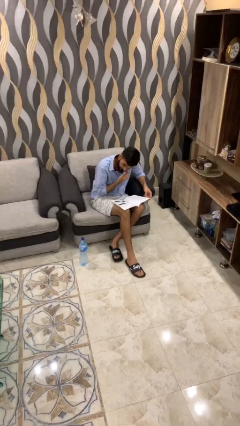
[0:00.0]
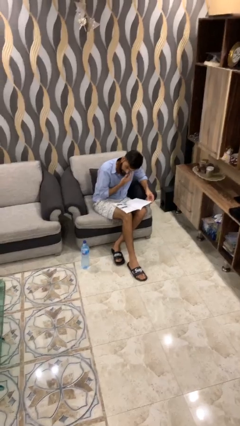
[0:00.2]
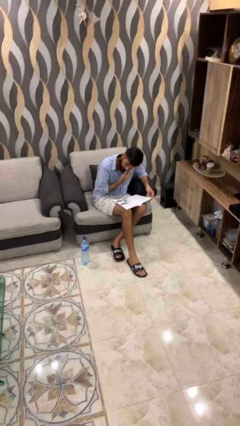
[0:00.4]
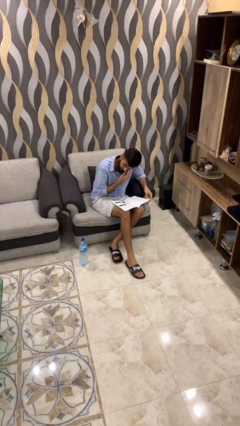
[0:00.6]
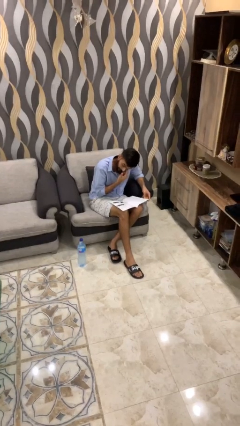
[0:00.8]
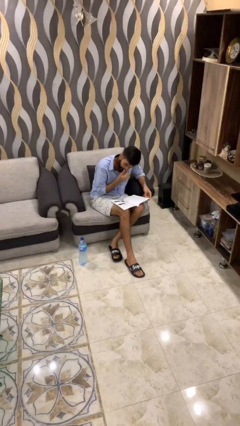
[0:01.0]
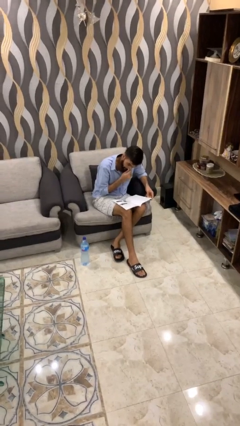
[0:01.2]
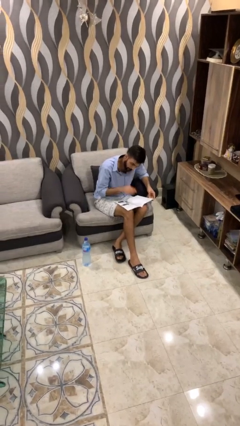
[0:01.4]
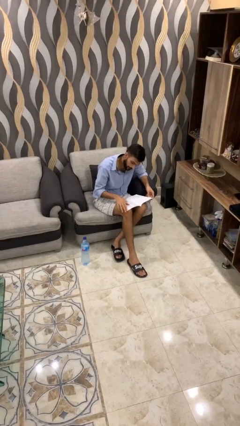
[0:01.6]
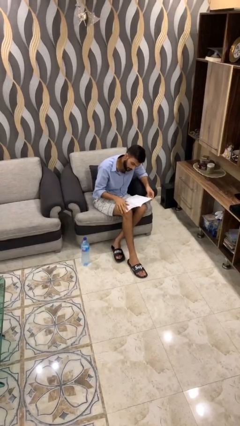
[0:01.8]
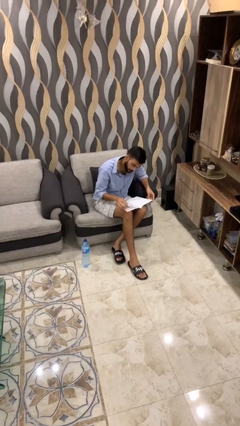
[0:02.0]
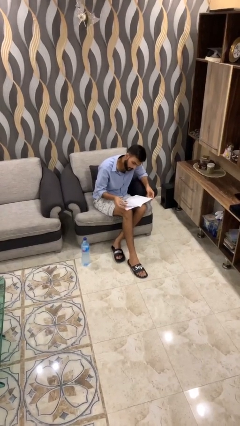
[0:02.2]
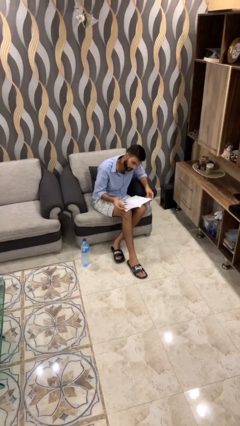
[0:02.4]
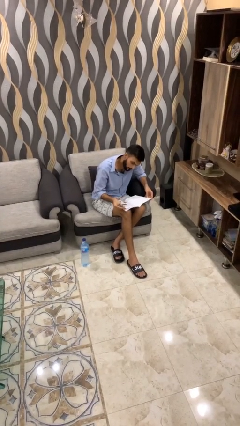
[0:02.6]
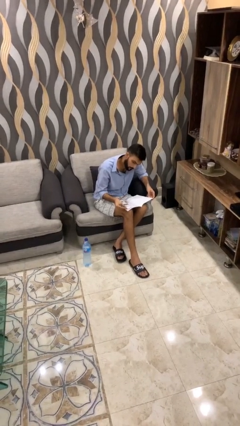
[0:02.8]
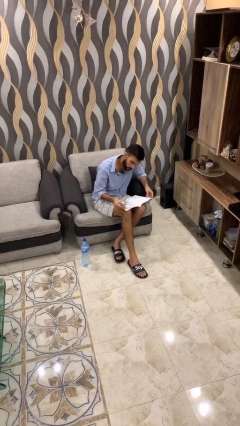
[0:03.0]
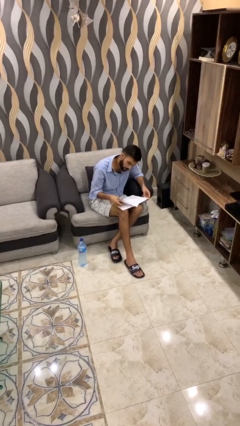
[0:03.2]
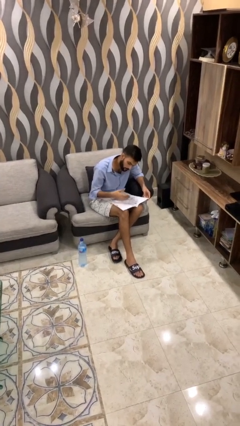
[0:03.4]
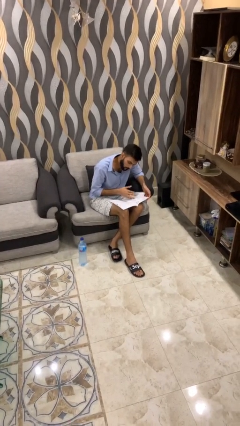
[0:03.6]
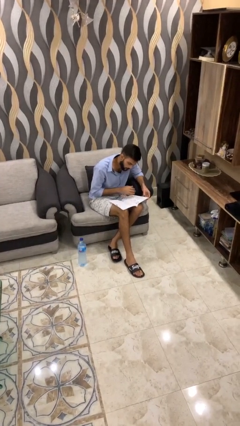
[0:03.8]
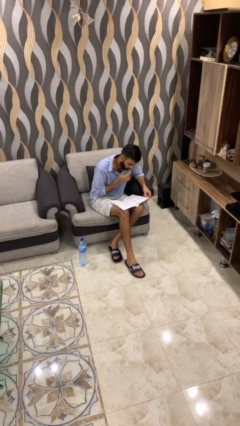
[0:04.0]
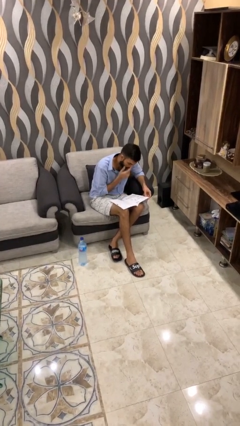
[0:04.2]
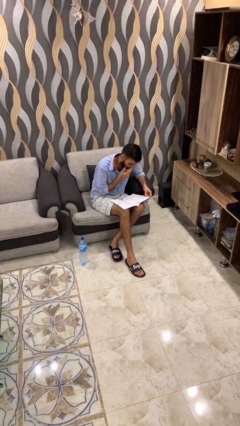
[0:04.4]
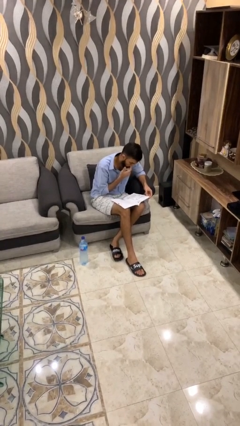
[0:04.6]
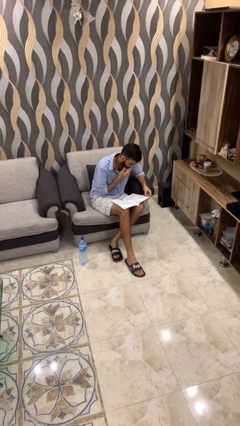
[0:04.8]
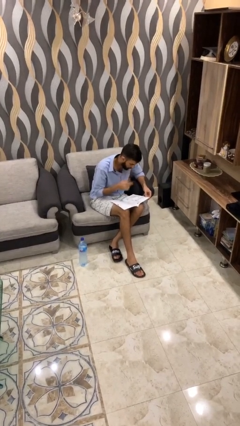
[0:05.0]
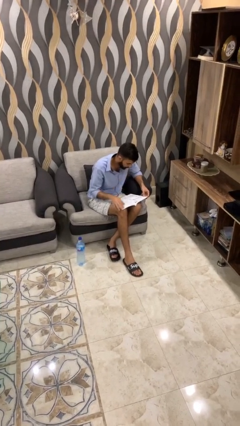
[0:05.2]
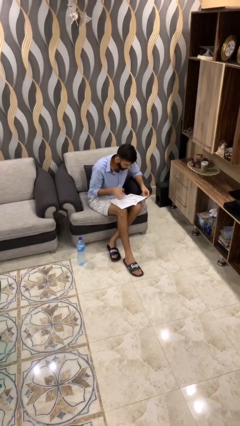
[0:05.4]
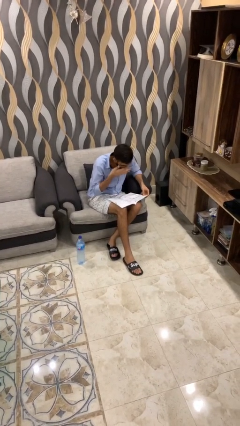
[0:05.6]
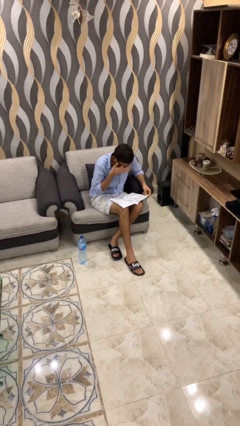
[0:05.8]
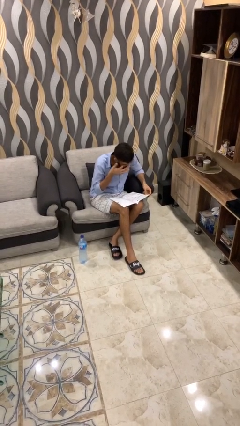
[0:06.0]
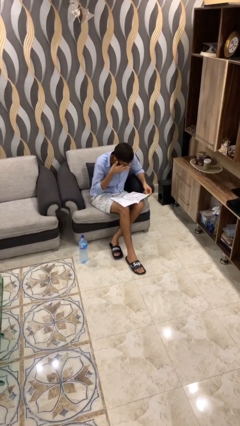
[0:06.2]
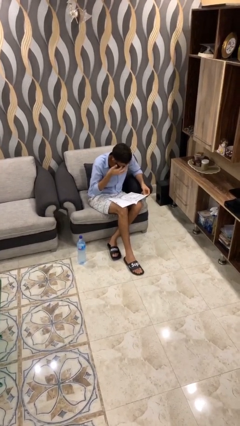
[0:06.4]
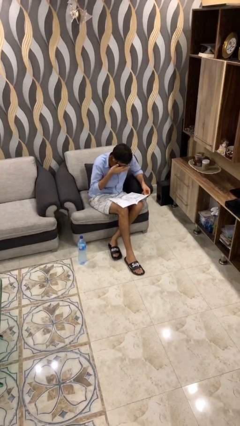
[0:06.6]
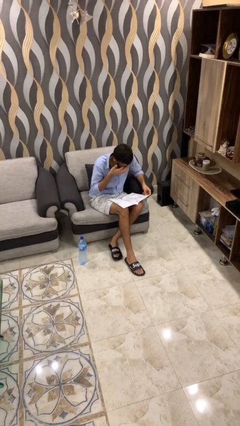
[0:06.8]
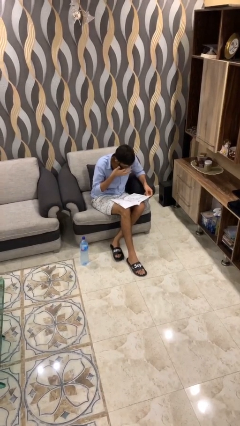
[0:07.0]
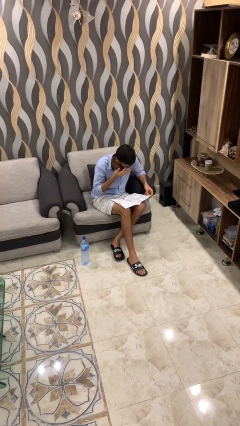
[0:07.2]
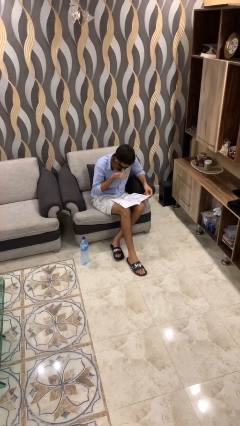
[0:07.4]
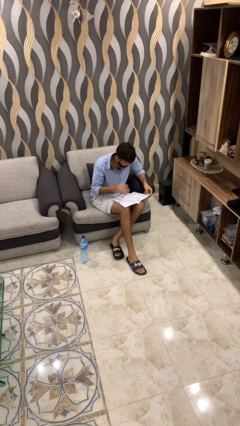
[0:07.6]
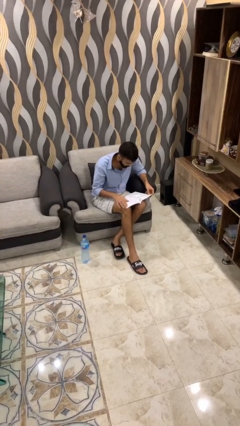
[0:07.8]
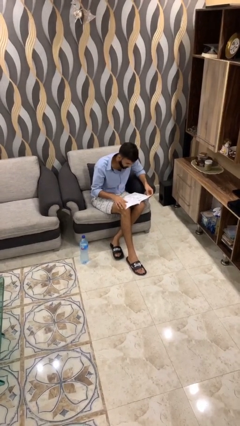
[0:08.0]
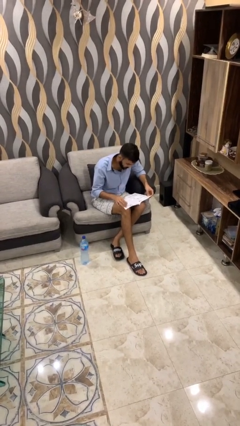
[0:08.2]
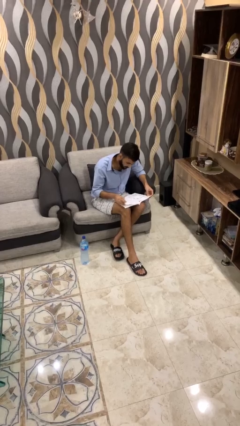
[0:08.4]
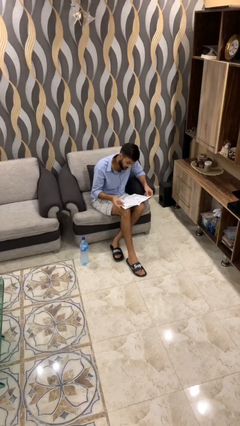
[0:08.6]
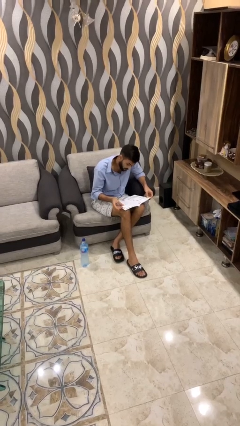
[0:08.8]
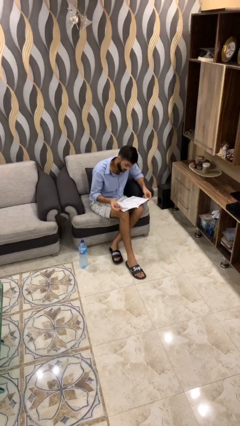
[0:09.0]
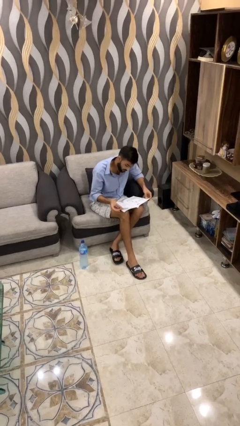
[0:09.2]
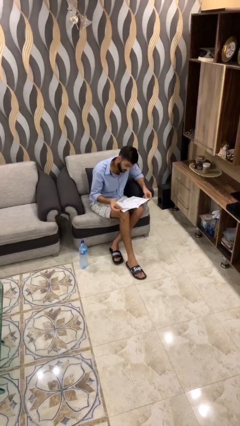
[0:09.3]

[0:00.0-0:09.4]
person reads document

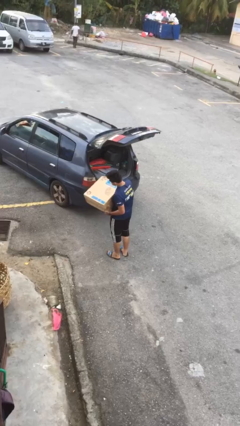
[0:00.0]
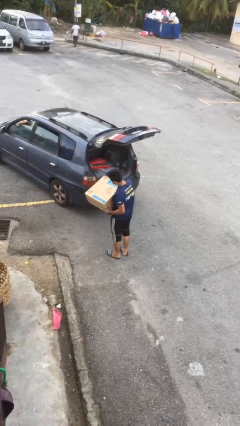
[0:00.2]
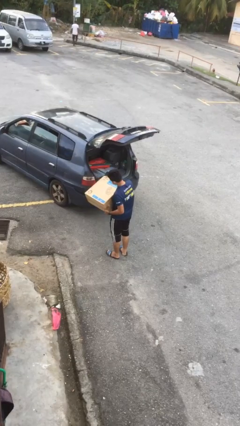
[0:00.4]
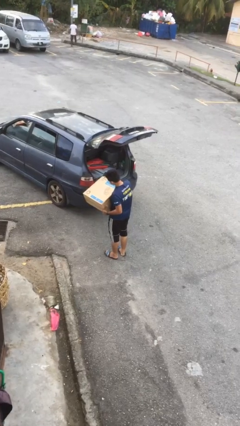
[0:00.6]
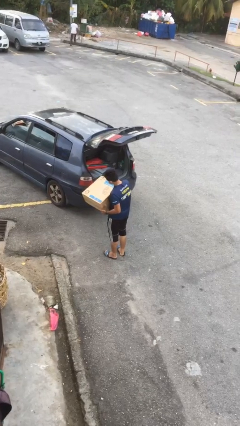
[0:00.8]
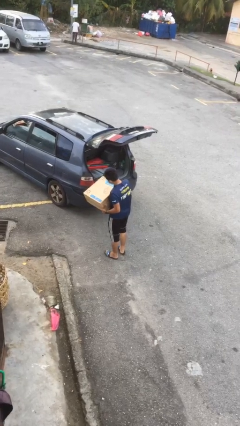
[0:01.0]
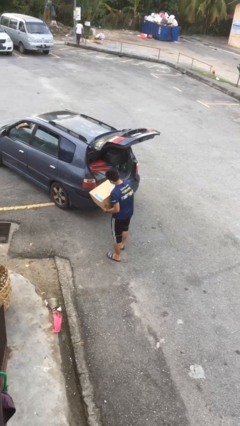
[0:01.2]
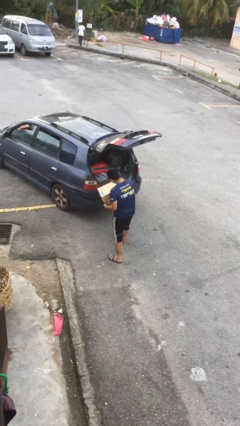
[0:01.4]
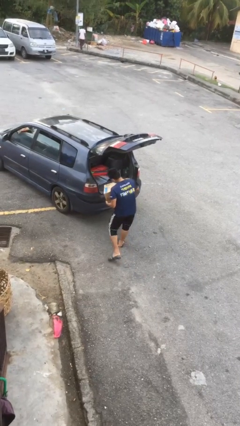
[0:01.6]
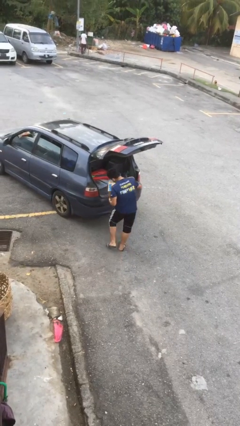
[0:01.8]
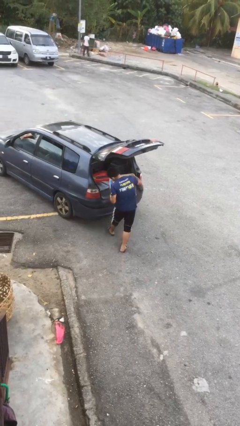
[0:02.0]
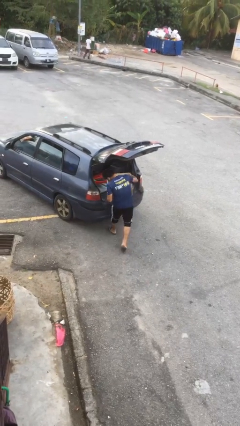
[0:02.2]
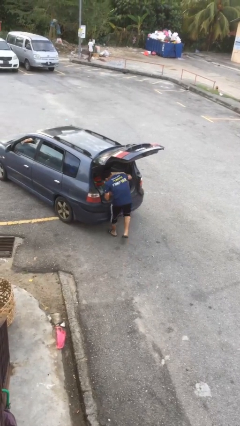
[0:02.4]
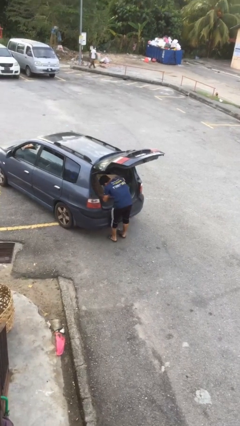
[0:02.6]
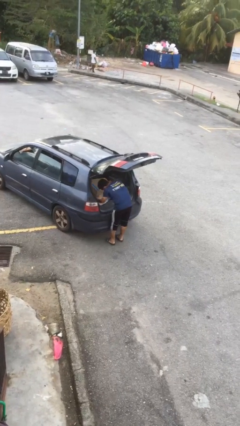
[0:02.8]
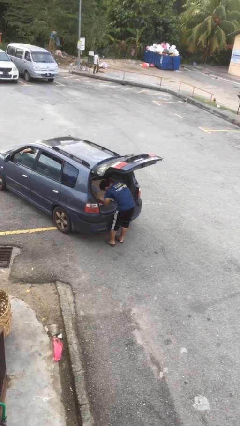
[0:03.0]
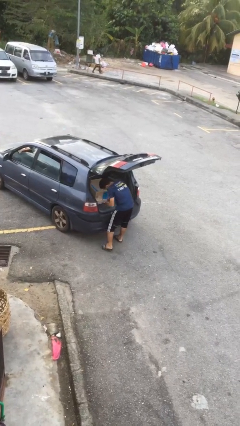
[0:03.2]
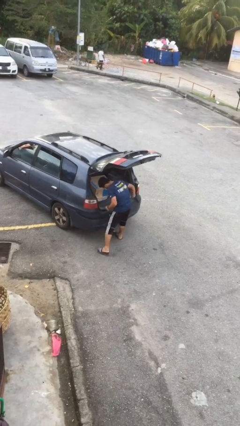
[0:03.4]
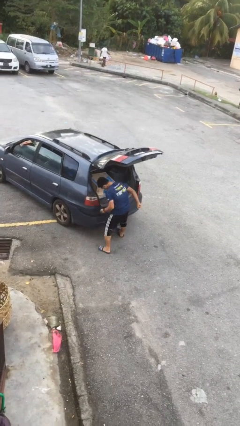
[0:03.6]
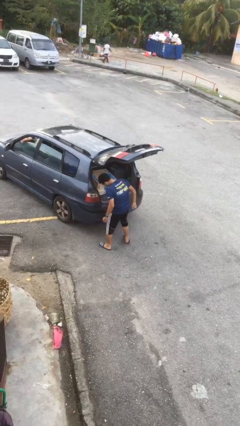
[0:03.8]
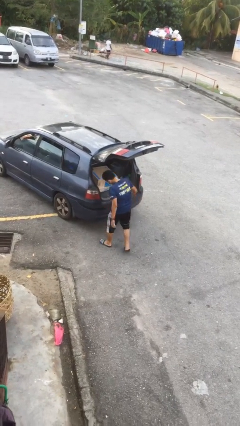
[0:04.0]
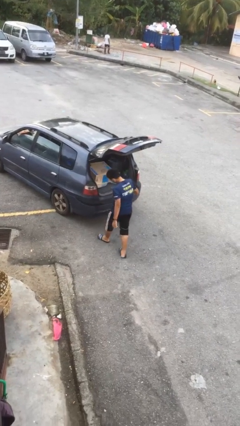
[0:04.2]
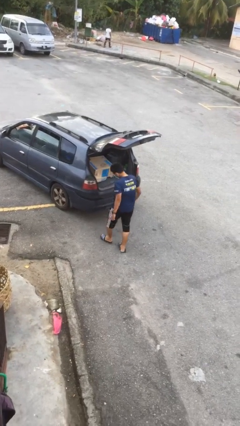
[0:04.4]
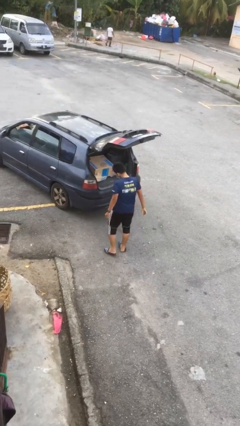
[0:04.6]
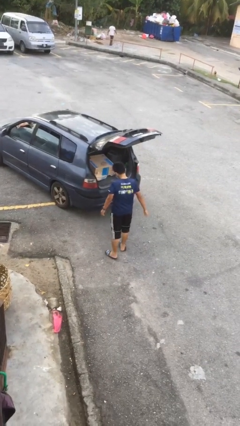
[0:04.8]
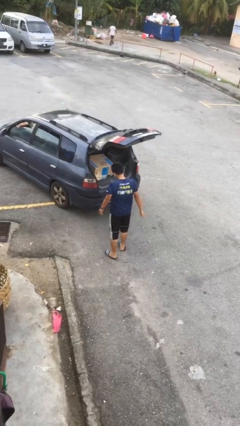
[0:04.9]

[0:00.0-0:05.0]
person loads car

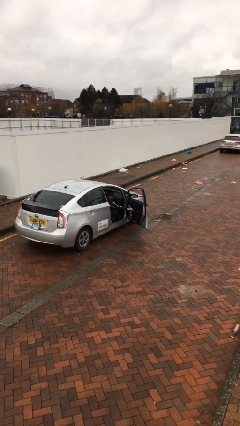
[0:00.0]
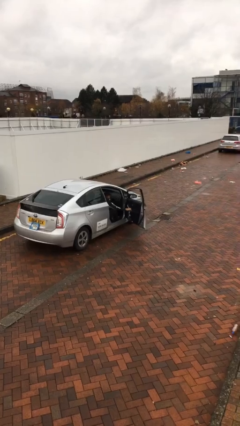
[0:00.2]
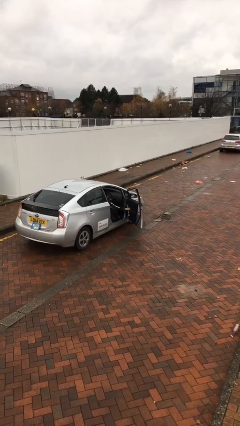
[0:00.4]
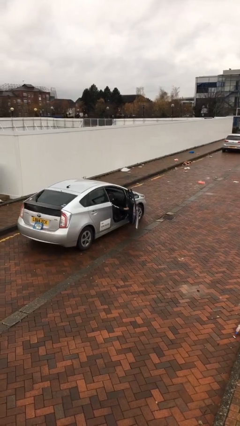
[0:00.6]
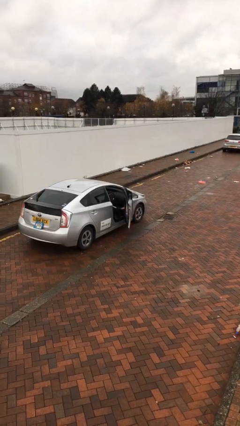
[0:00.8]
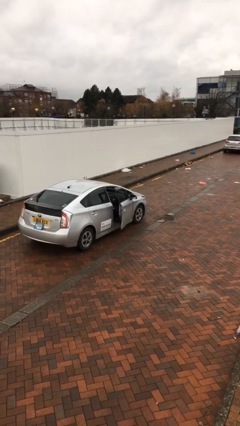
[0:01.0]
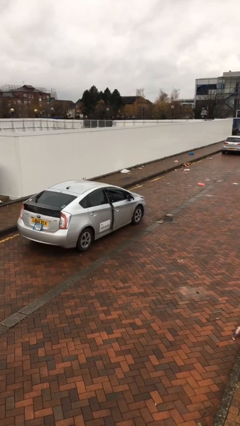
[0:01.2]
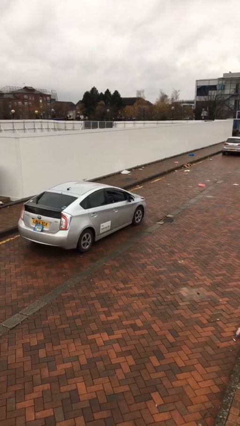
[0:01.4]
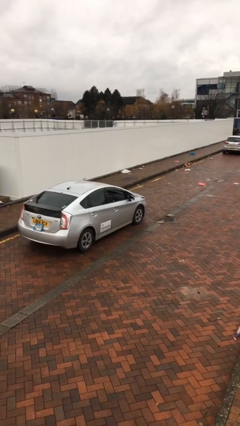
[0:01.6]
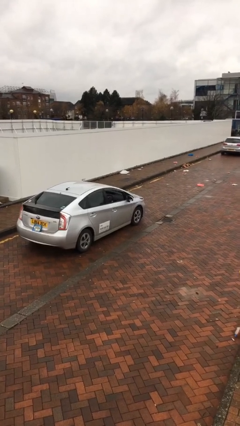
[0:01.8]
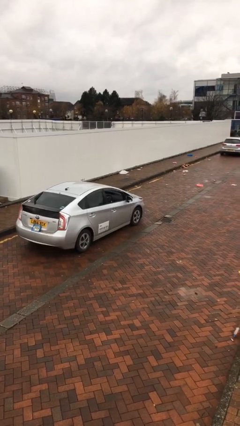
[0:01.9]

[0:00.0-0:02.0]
person closes car door

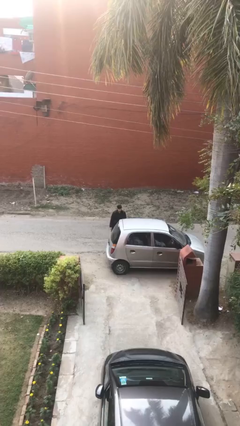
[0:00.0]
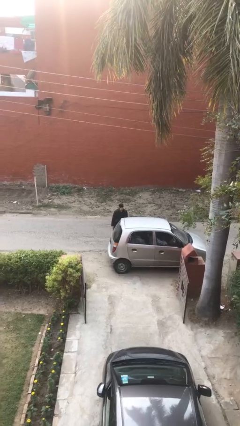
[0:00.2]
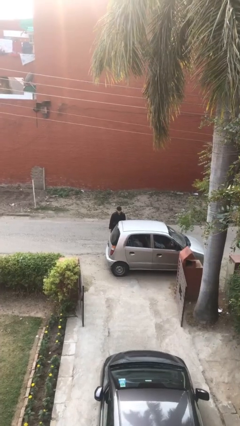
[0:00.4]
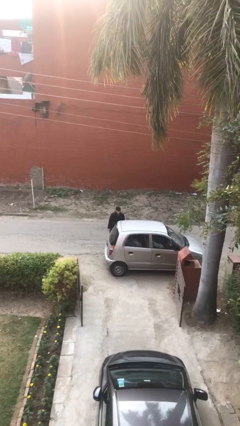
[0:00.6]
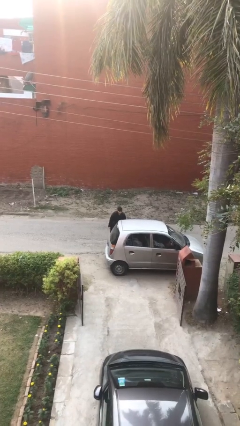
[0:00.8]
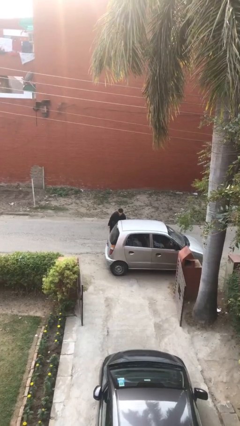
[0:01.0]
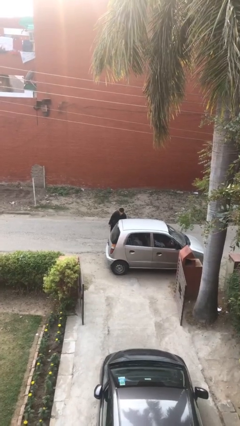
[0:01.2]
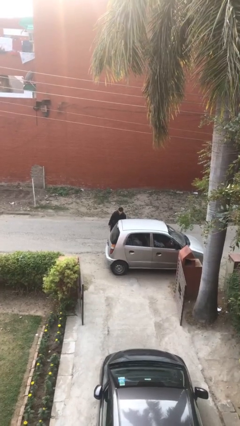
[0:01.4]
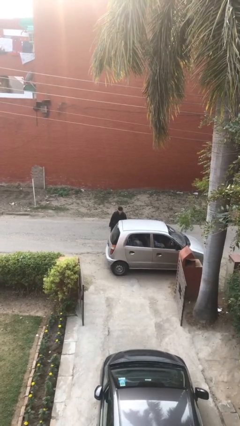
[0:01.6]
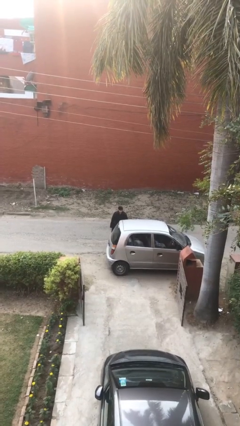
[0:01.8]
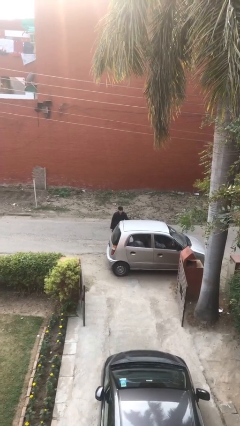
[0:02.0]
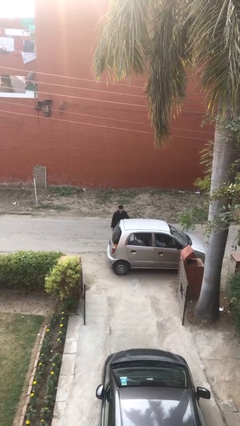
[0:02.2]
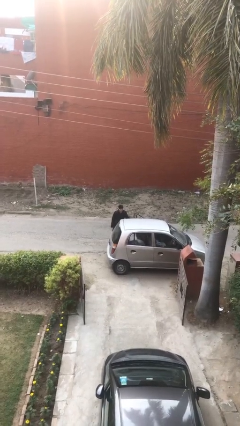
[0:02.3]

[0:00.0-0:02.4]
person opens car door
